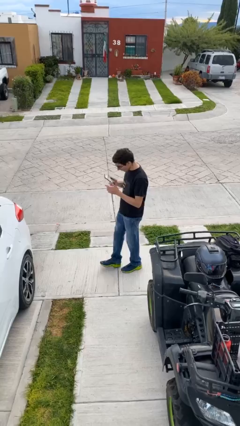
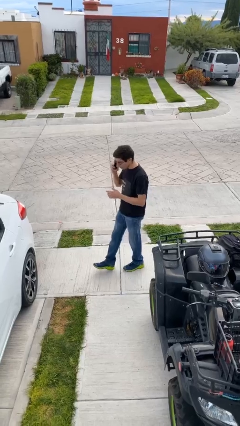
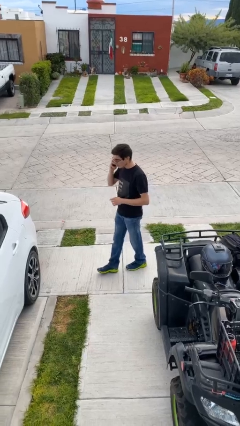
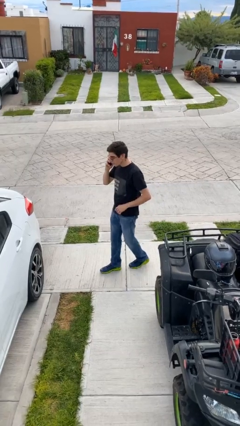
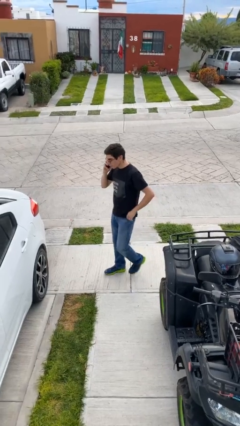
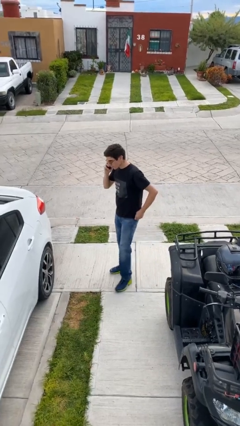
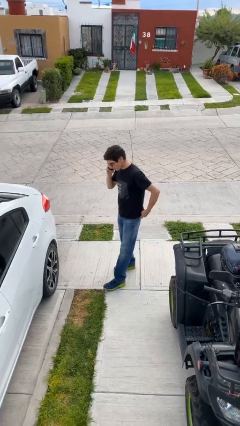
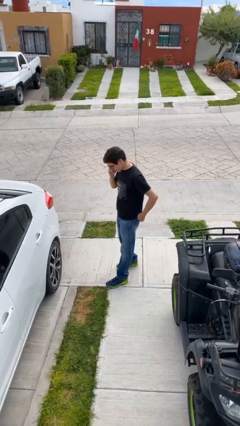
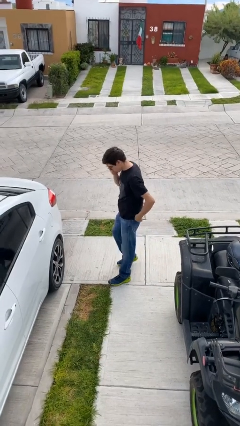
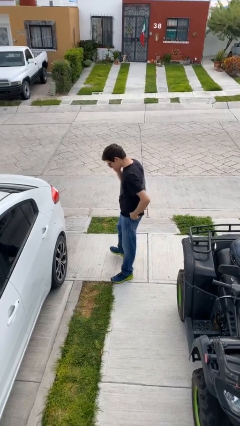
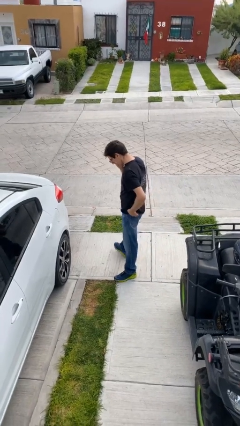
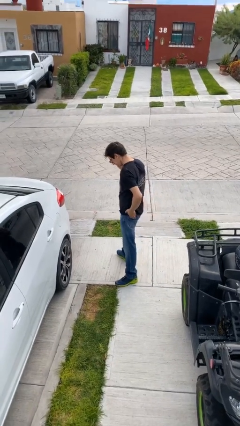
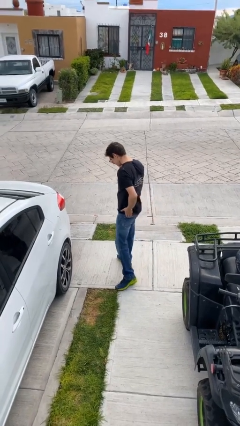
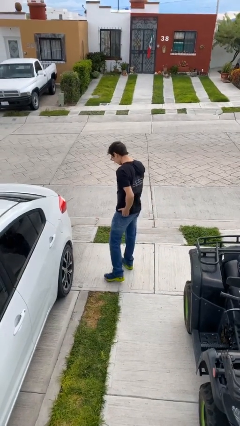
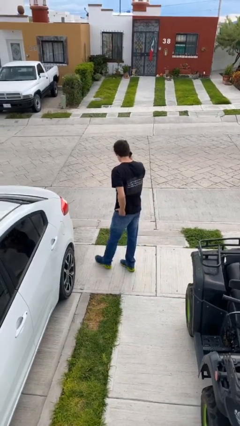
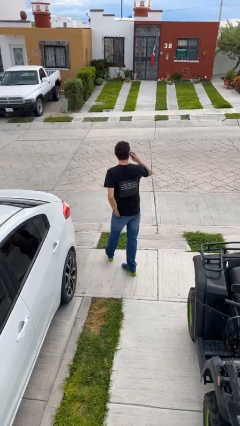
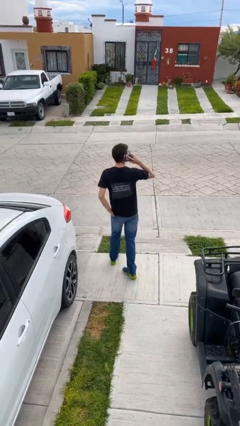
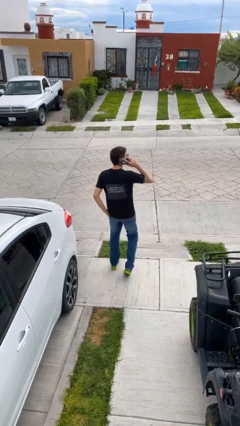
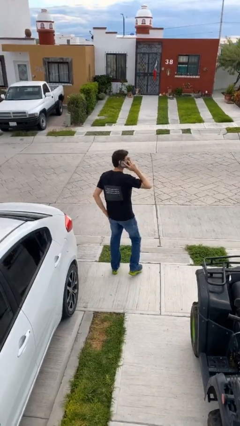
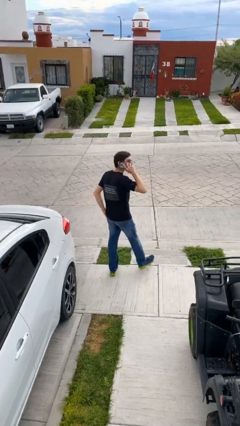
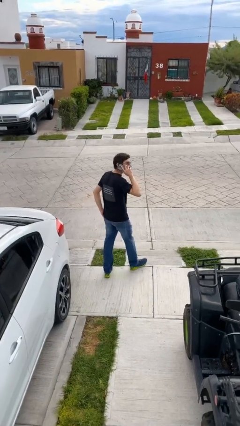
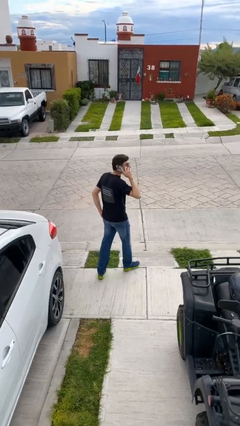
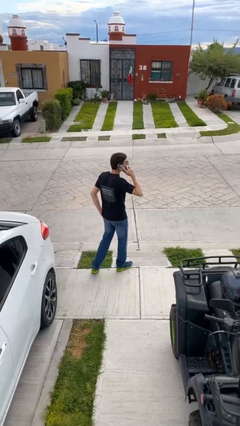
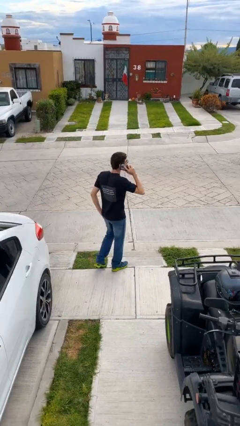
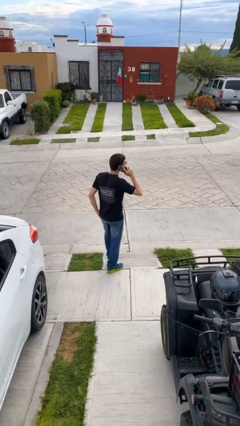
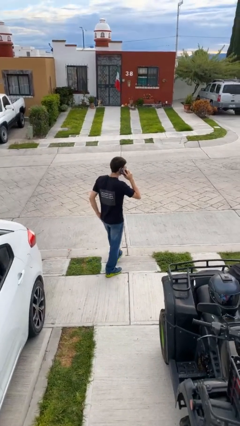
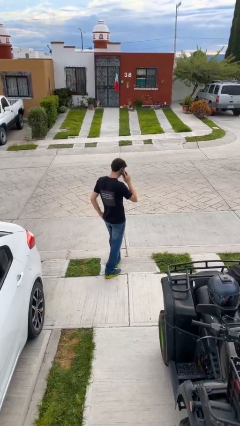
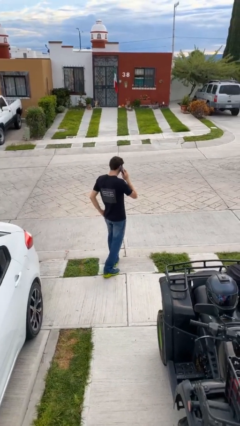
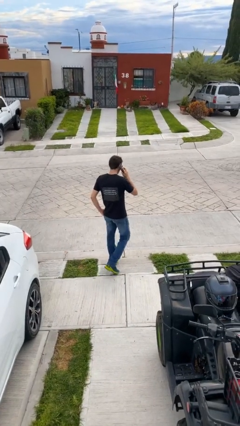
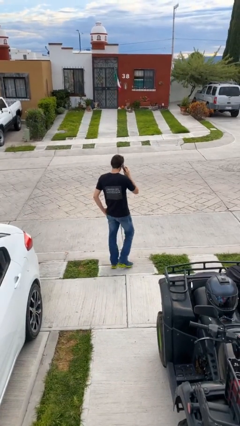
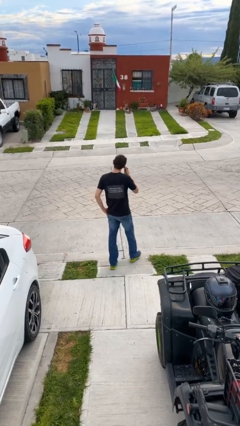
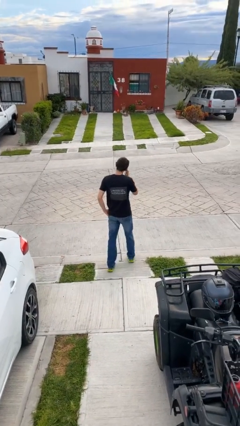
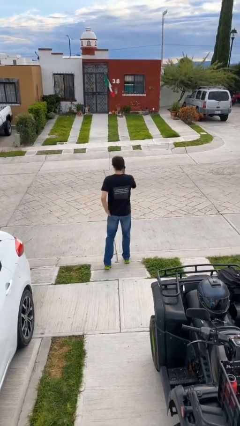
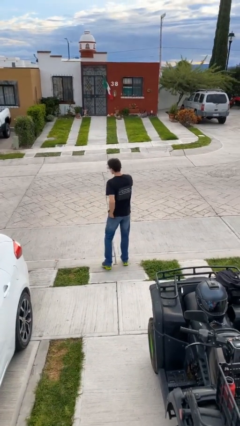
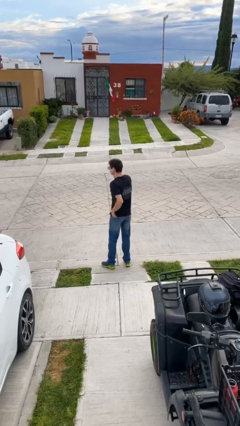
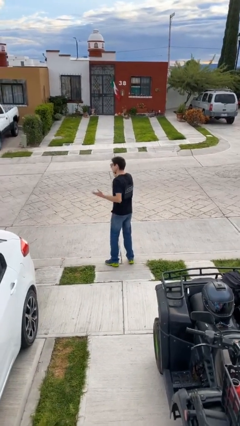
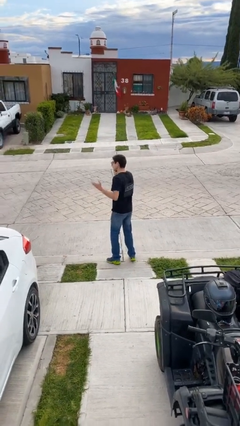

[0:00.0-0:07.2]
person talks on phone

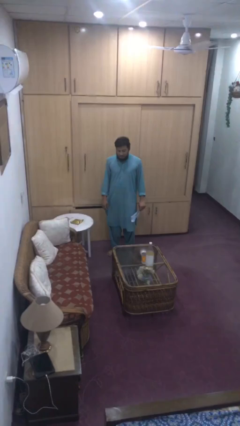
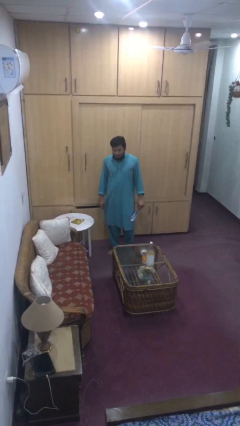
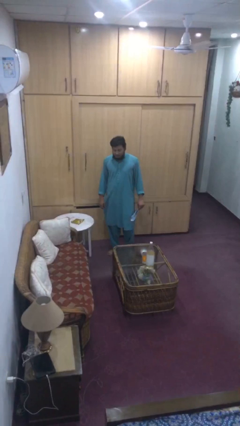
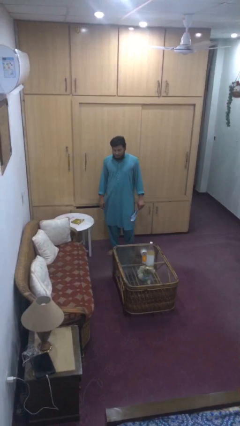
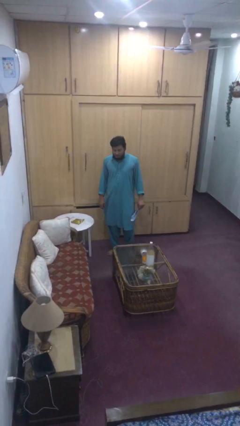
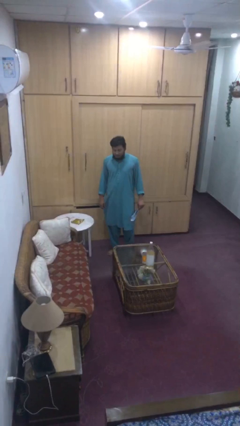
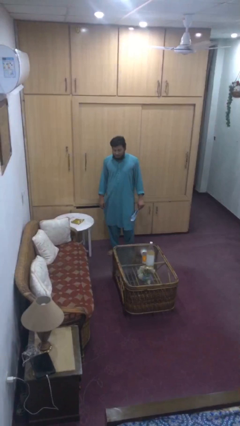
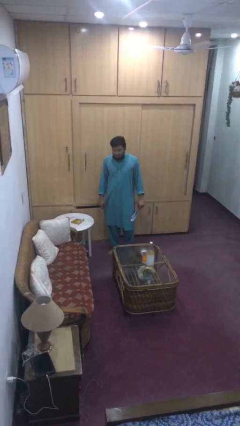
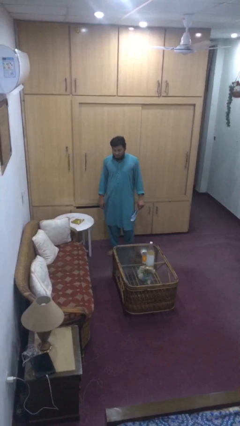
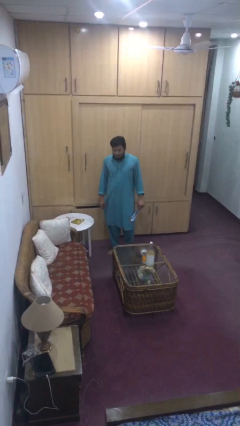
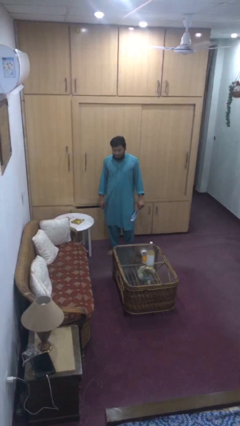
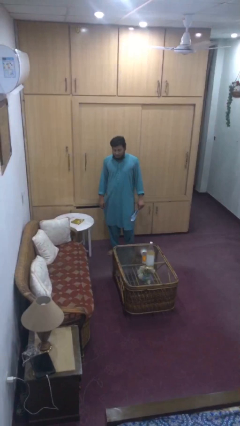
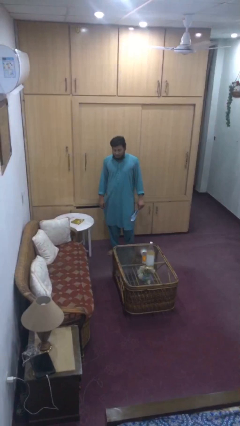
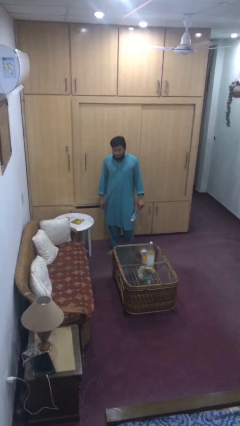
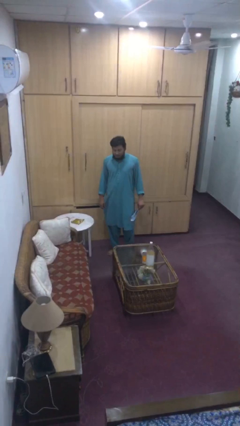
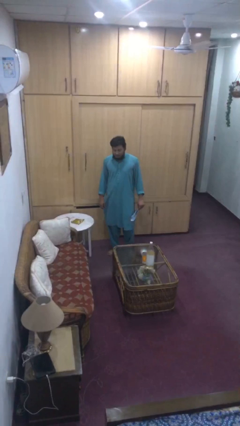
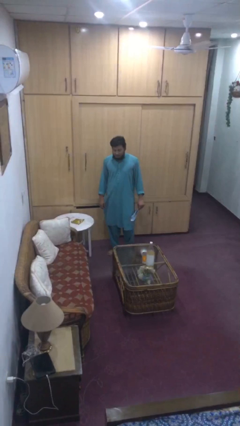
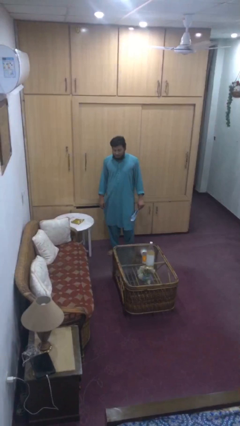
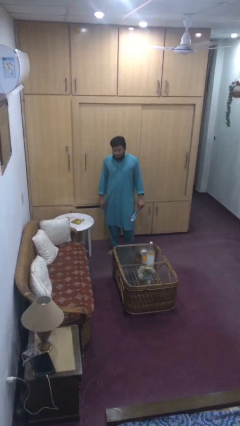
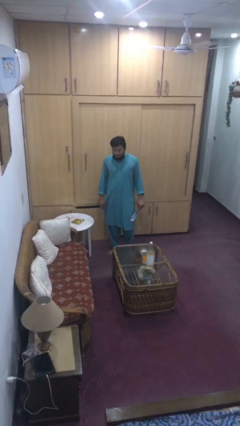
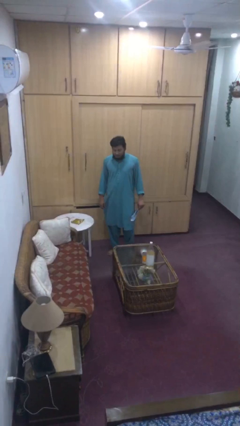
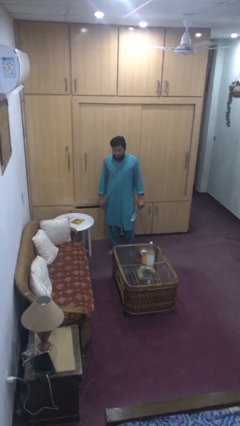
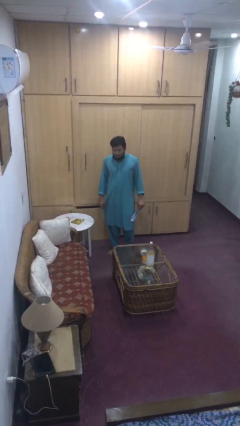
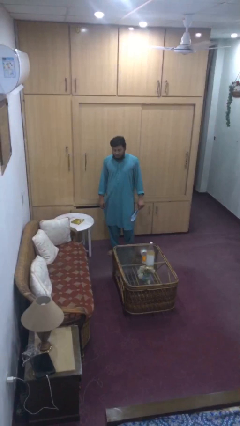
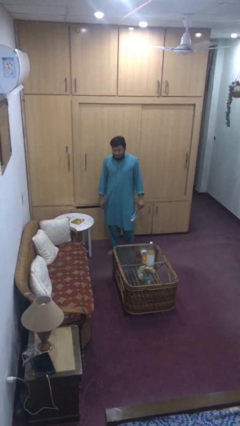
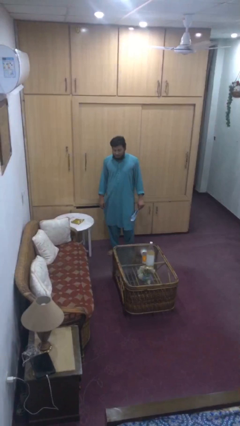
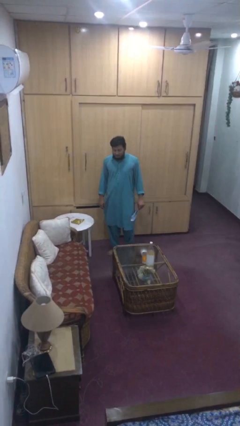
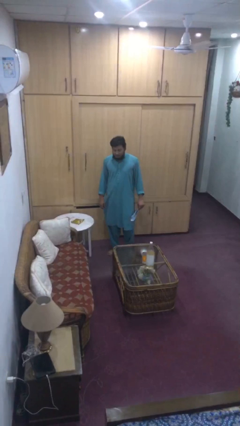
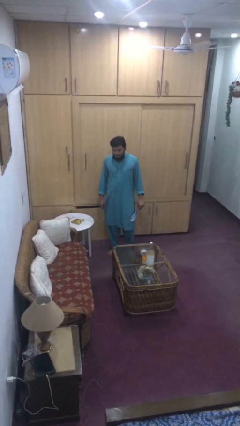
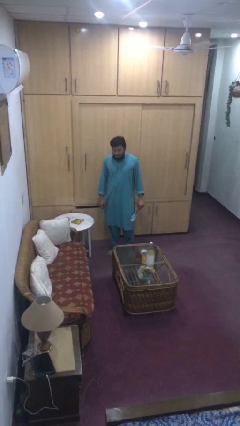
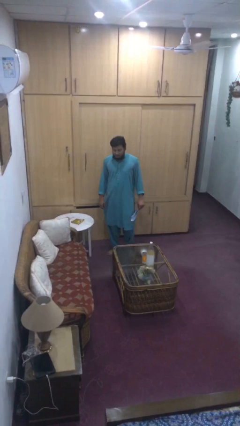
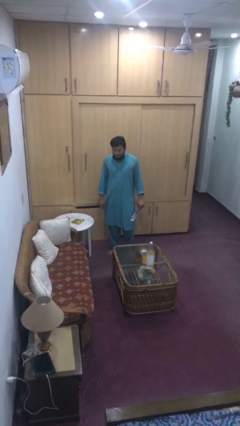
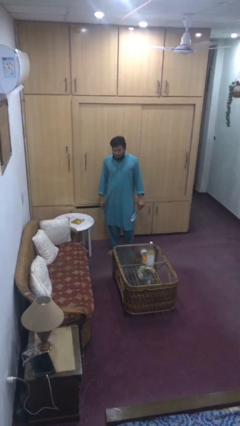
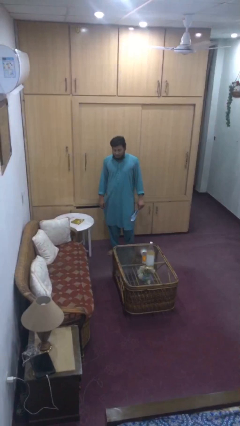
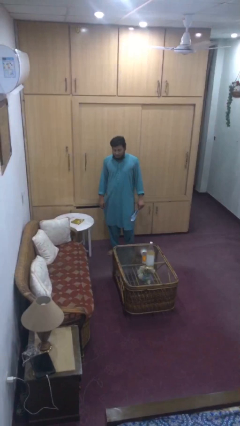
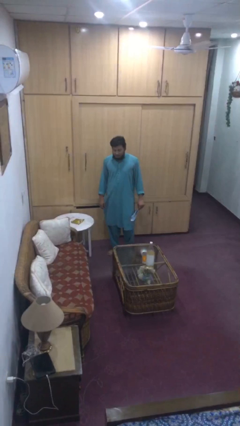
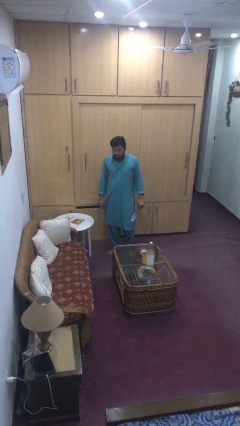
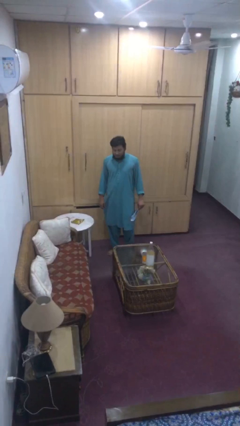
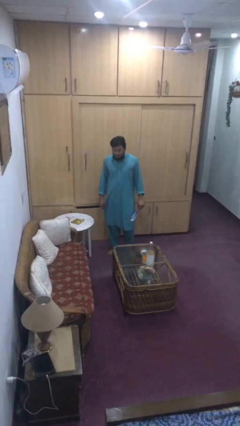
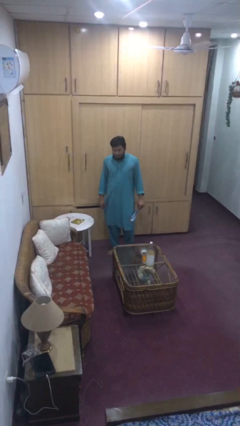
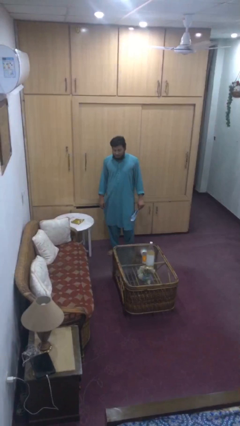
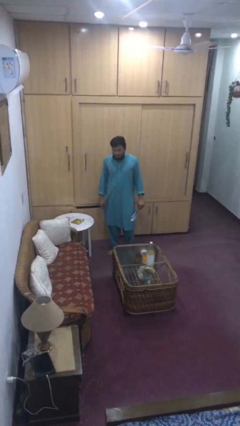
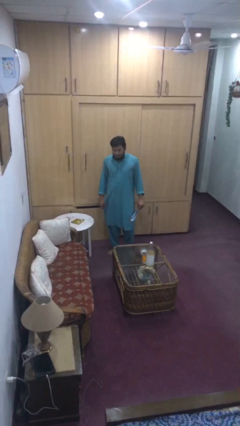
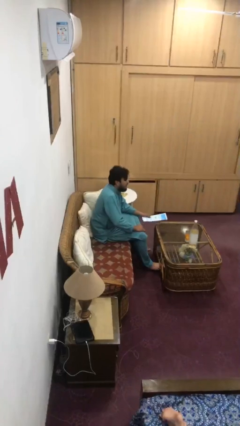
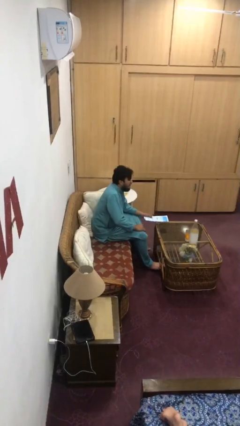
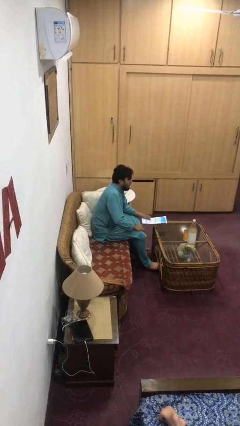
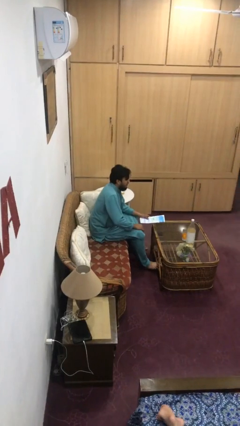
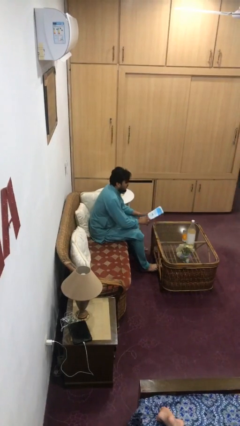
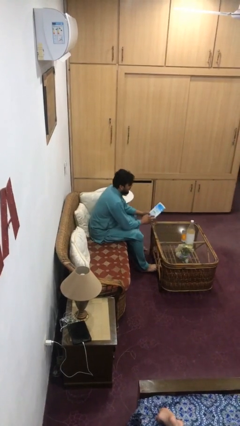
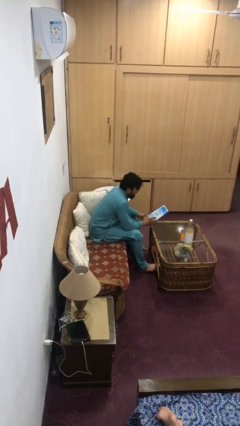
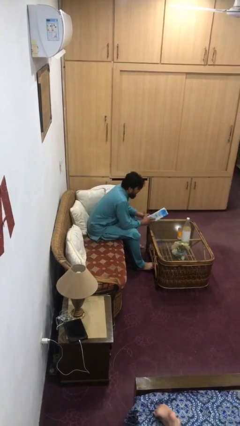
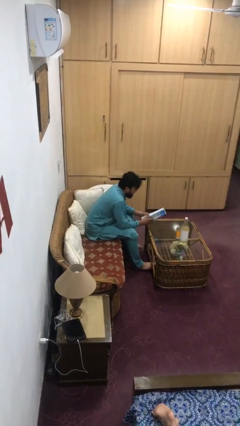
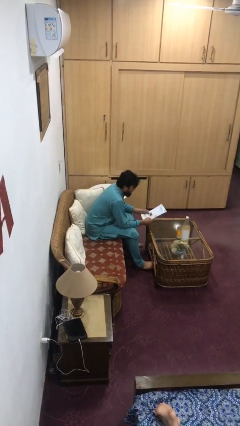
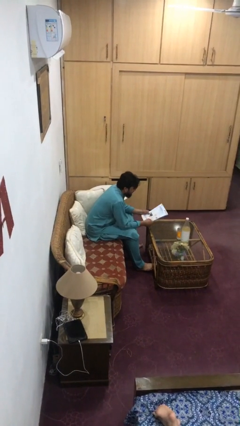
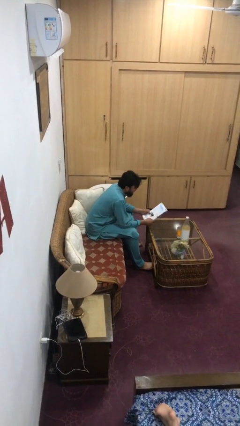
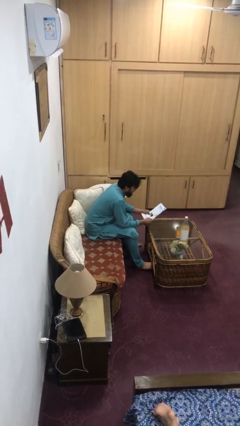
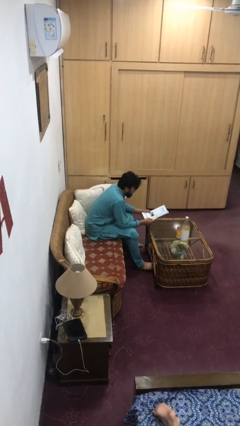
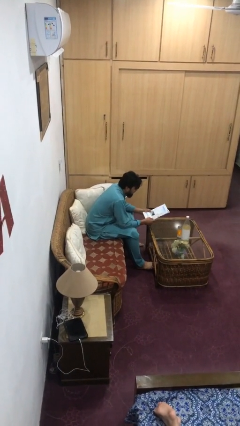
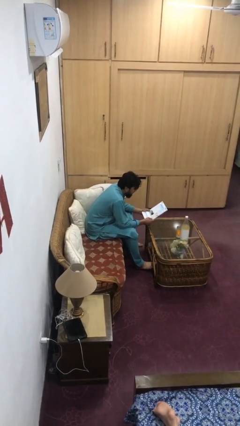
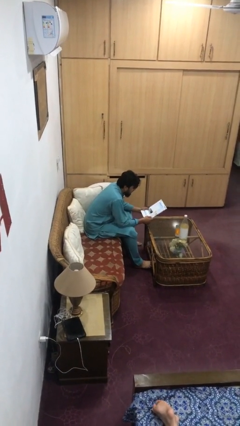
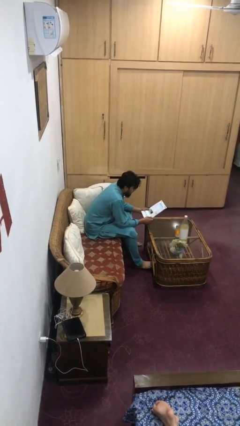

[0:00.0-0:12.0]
person reads document
